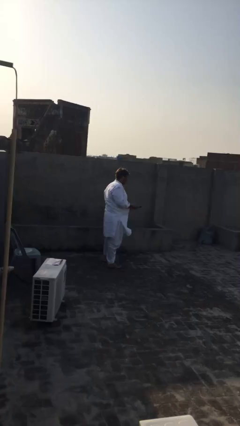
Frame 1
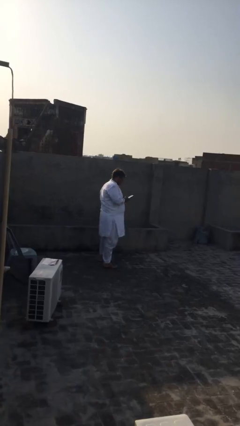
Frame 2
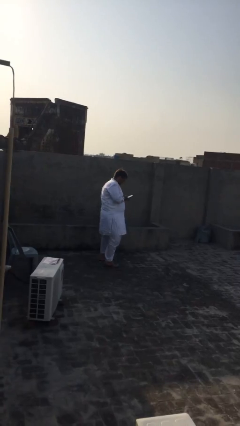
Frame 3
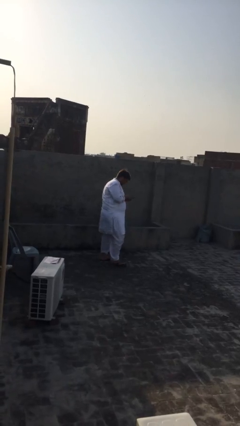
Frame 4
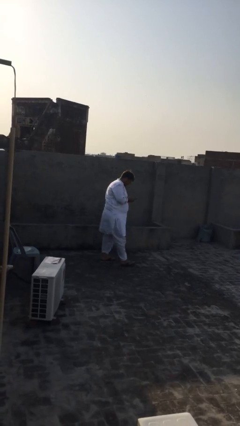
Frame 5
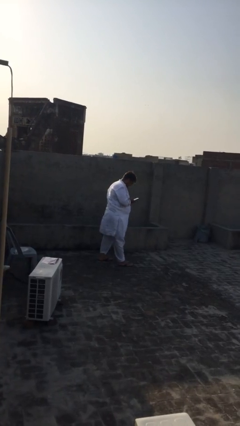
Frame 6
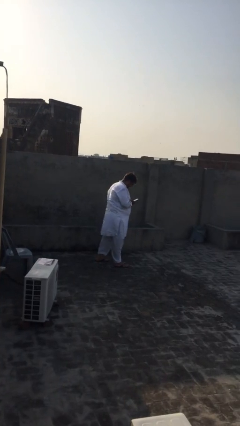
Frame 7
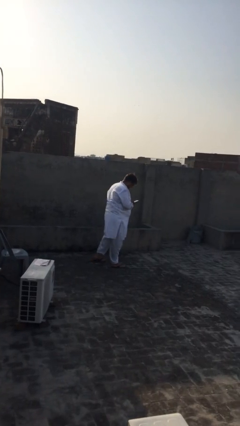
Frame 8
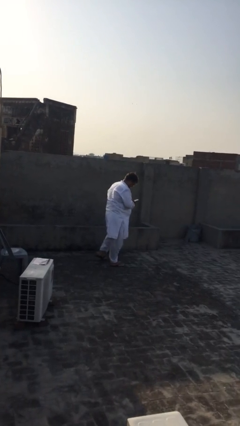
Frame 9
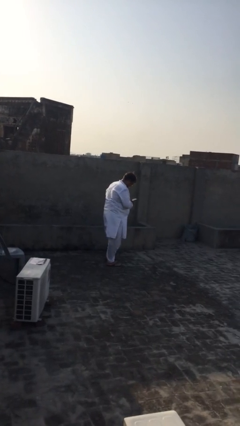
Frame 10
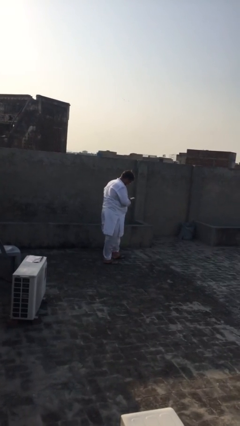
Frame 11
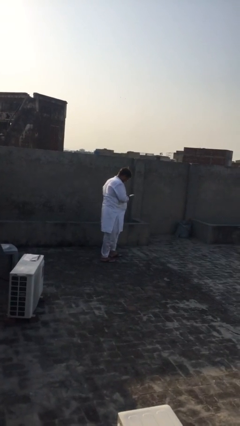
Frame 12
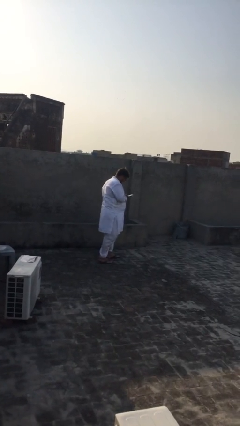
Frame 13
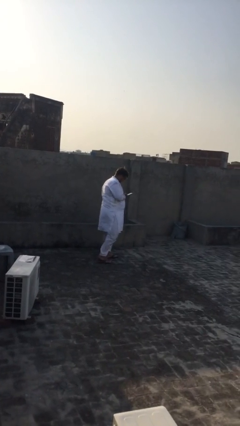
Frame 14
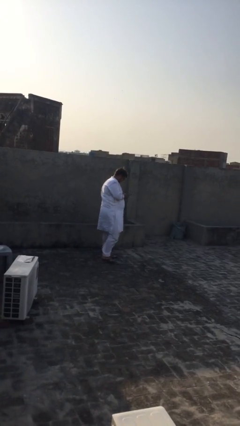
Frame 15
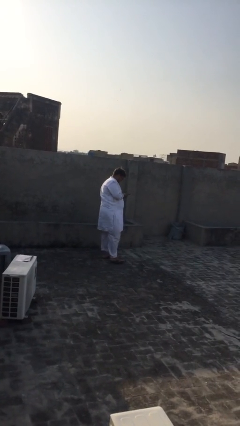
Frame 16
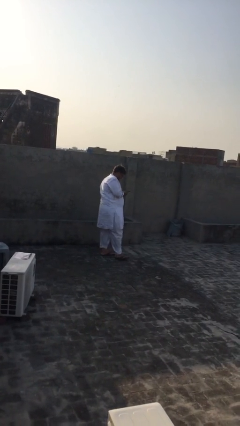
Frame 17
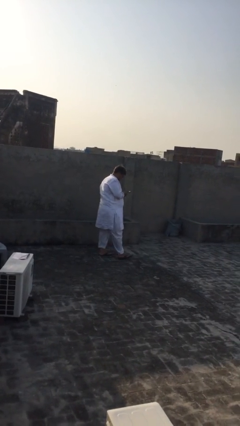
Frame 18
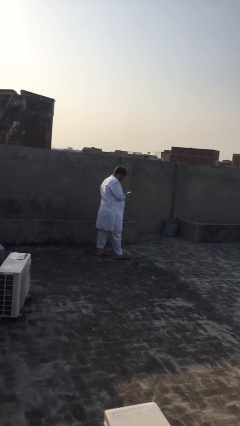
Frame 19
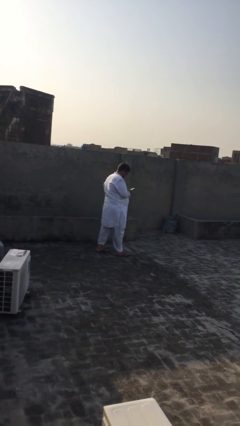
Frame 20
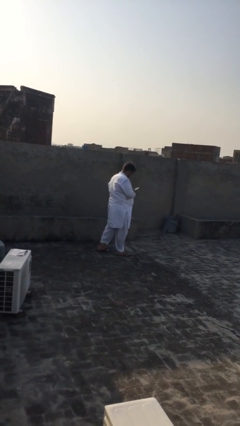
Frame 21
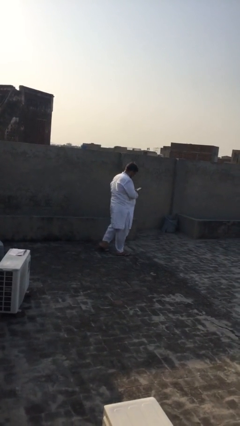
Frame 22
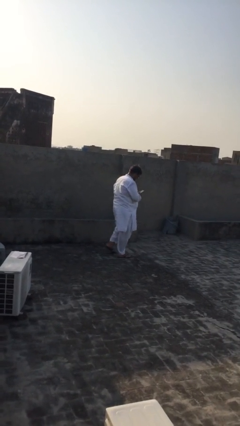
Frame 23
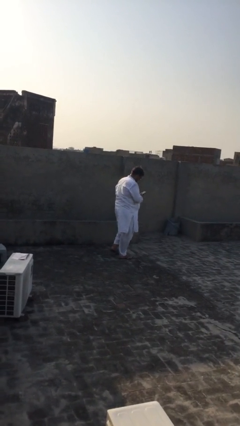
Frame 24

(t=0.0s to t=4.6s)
person texts on phone

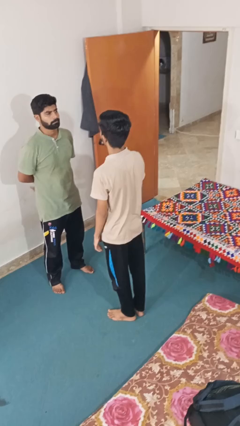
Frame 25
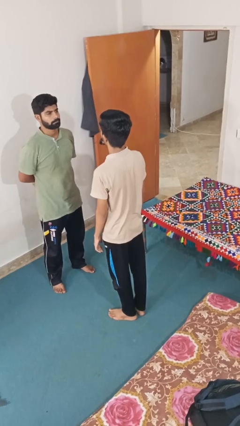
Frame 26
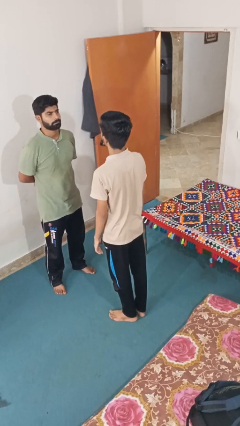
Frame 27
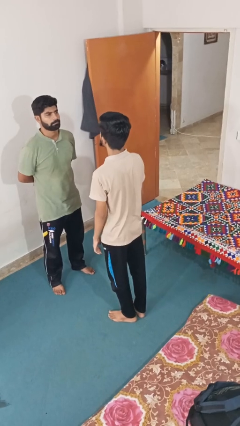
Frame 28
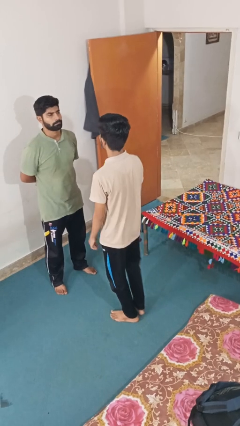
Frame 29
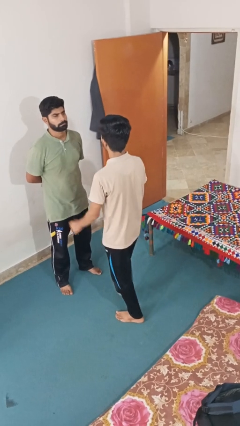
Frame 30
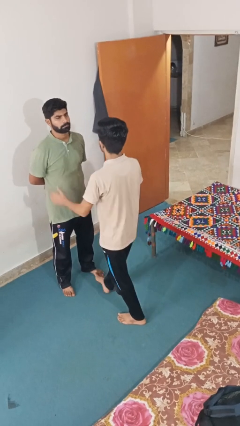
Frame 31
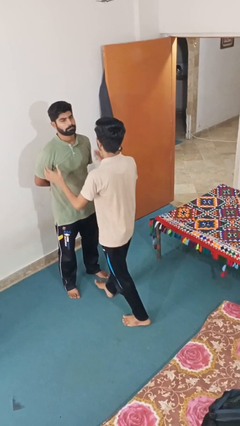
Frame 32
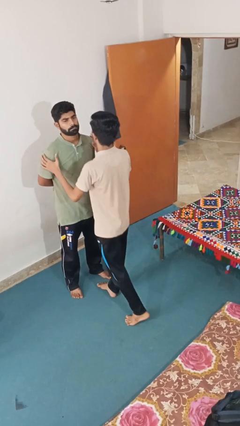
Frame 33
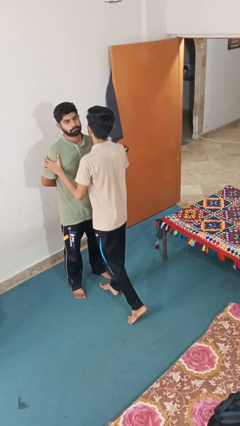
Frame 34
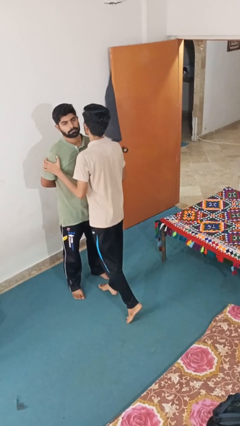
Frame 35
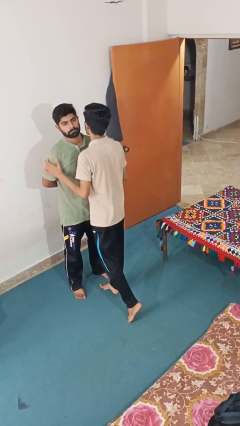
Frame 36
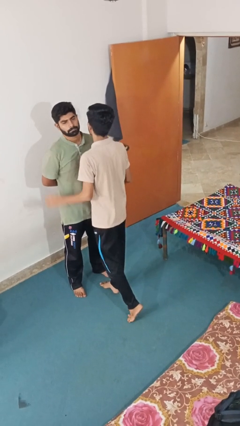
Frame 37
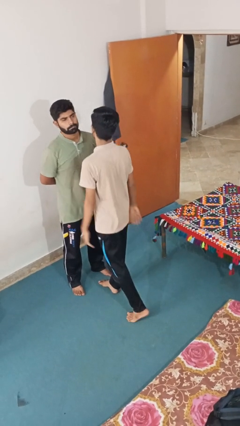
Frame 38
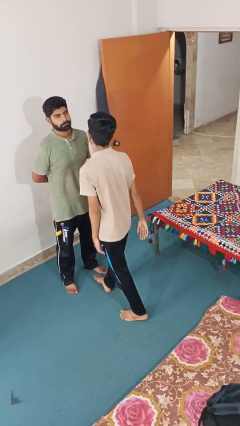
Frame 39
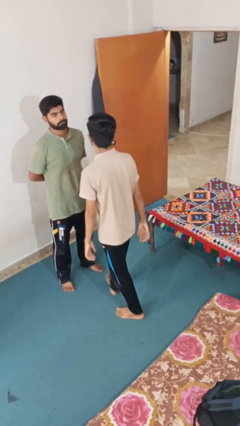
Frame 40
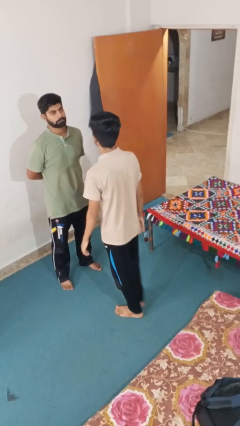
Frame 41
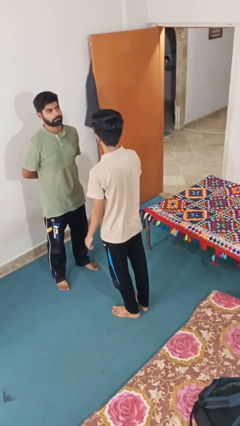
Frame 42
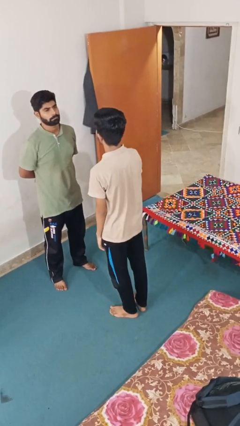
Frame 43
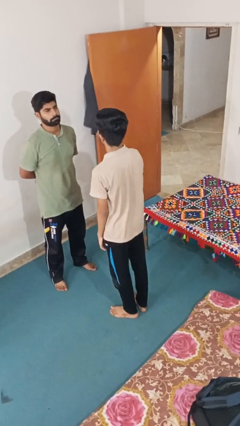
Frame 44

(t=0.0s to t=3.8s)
person kisses cheek of person

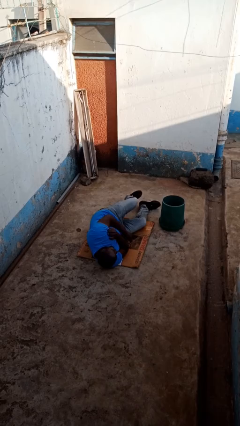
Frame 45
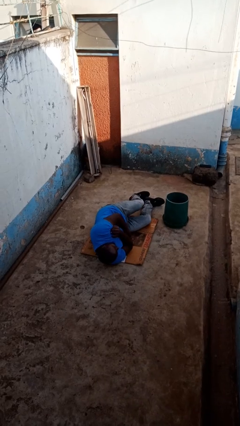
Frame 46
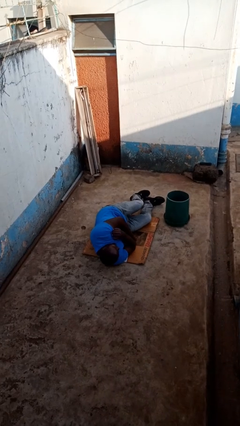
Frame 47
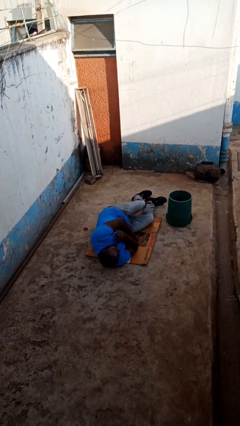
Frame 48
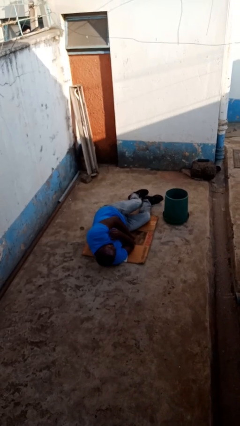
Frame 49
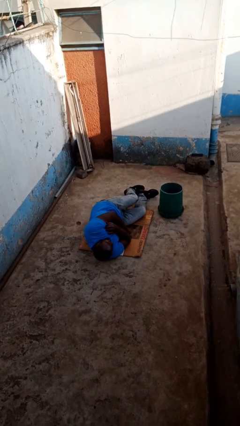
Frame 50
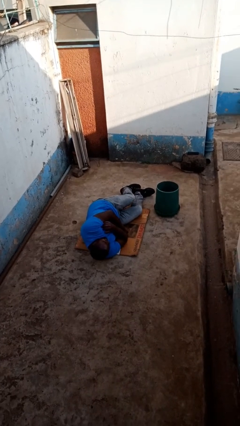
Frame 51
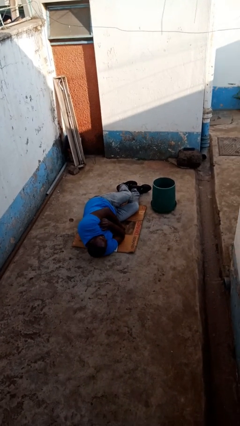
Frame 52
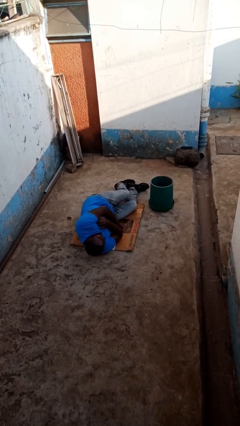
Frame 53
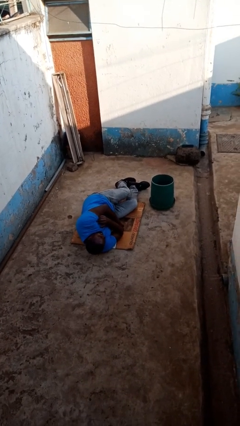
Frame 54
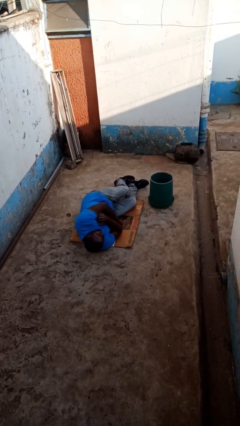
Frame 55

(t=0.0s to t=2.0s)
person lies down on floor

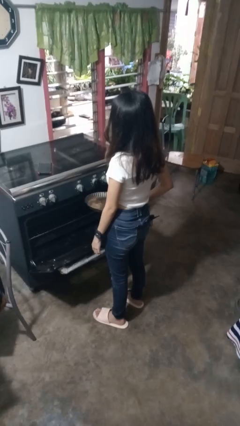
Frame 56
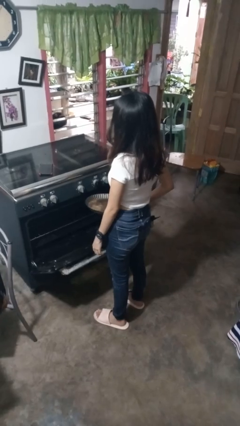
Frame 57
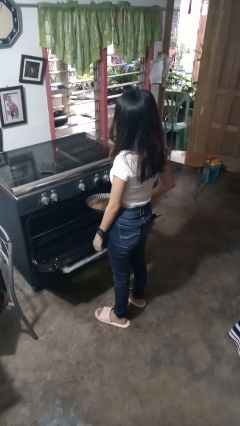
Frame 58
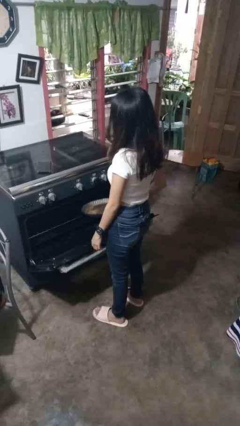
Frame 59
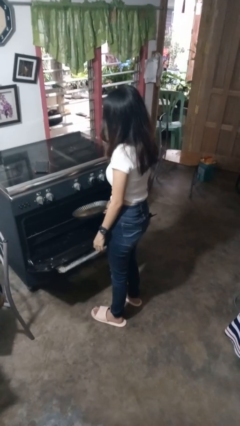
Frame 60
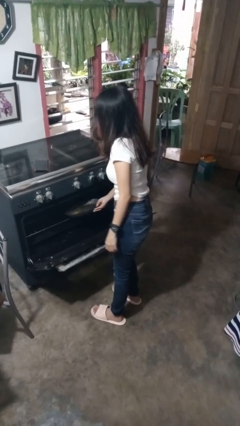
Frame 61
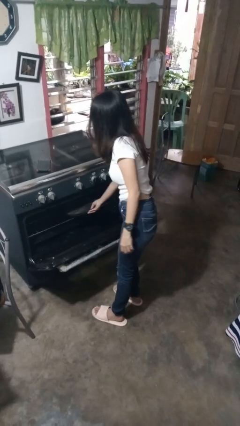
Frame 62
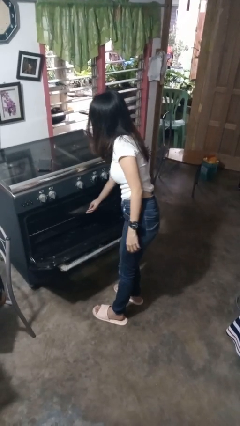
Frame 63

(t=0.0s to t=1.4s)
person puts object into oven

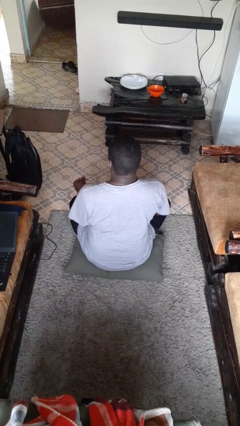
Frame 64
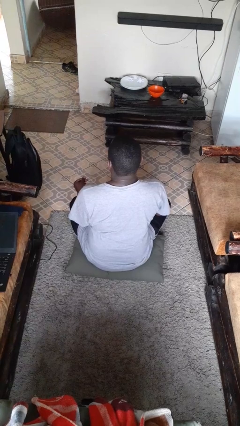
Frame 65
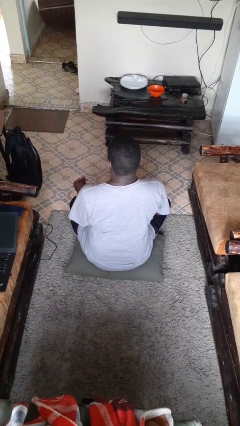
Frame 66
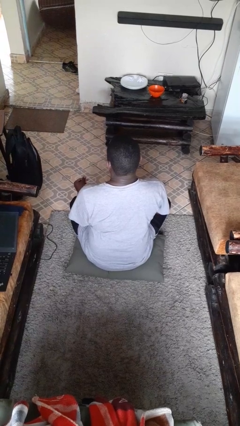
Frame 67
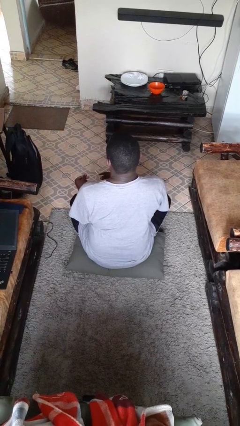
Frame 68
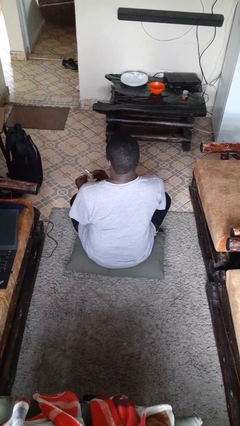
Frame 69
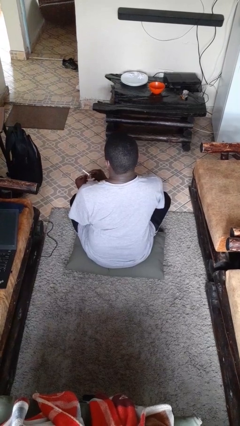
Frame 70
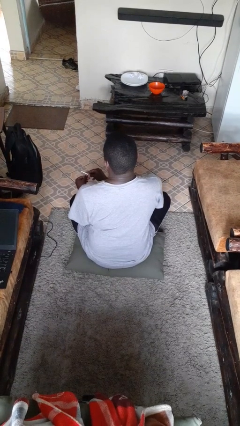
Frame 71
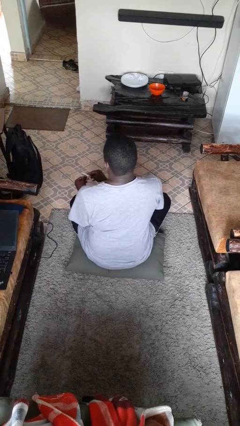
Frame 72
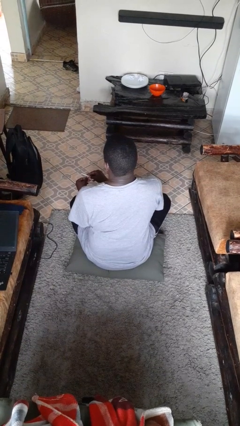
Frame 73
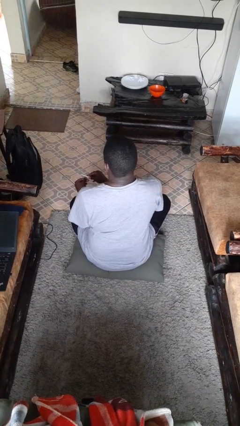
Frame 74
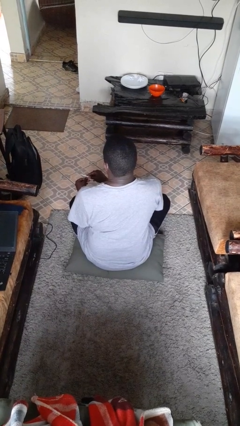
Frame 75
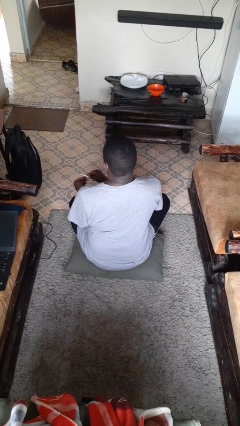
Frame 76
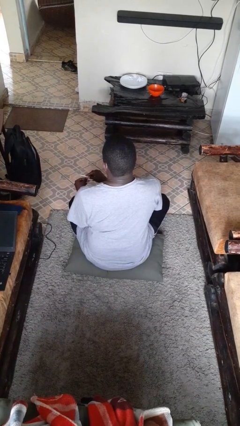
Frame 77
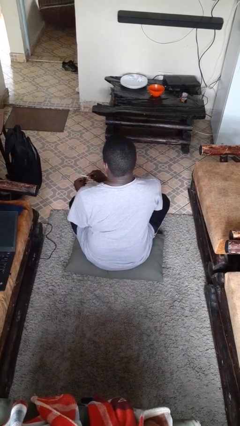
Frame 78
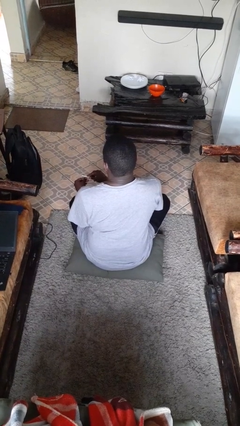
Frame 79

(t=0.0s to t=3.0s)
person files fingernails

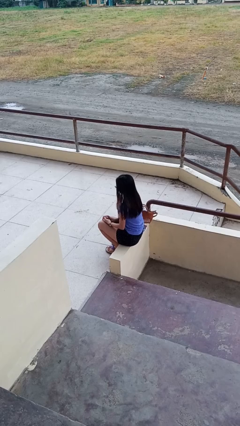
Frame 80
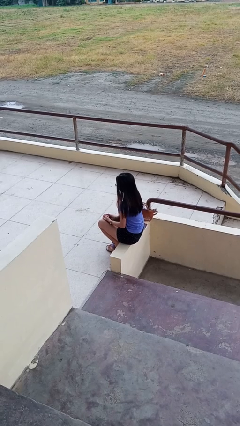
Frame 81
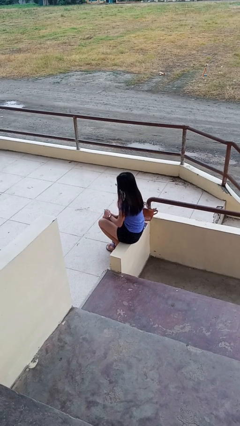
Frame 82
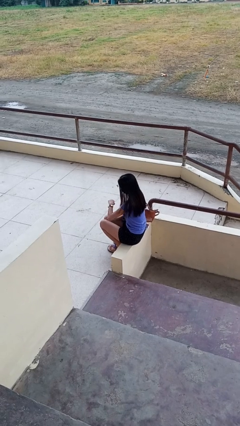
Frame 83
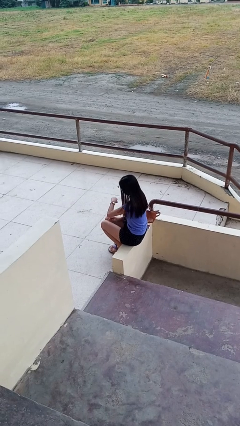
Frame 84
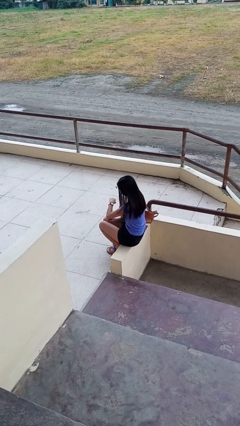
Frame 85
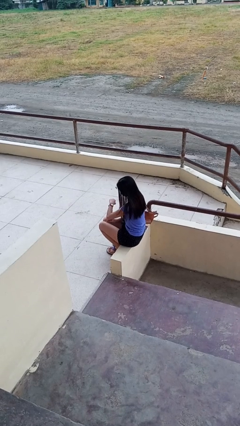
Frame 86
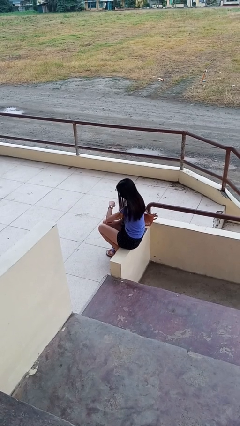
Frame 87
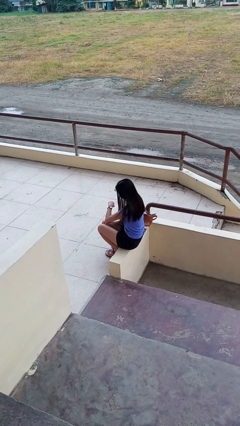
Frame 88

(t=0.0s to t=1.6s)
person looks at wristwatch

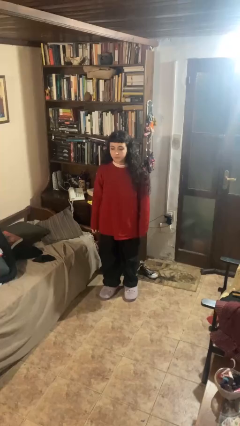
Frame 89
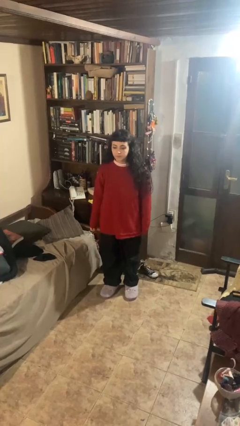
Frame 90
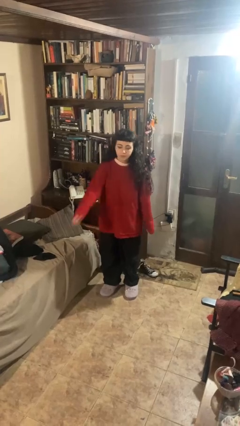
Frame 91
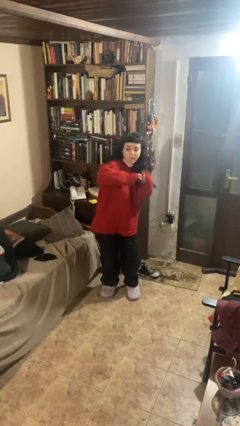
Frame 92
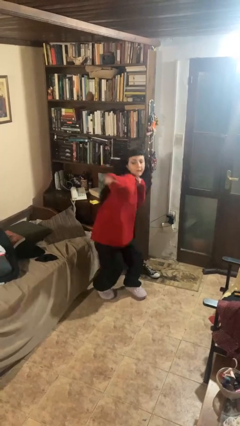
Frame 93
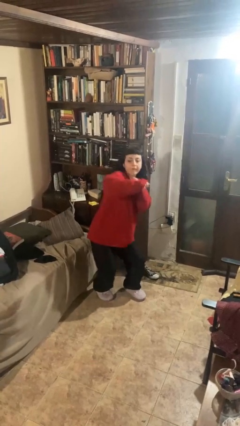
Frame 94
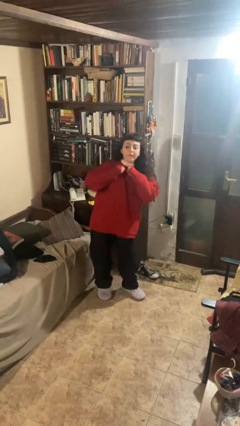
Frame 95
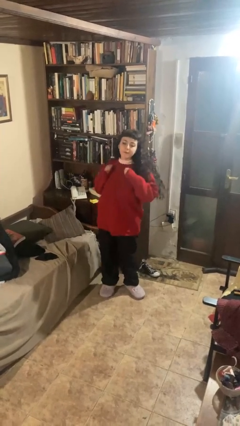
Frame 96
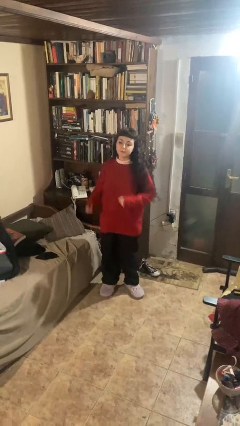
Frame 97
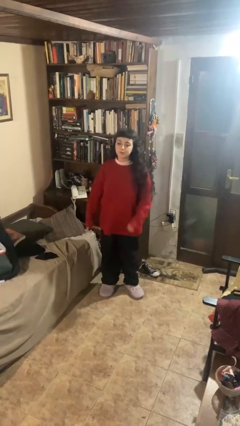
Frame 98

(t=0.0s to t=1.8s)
person karate chop
